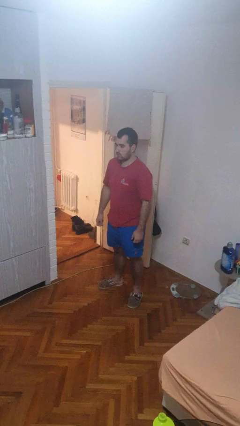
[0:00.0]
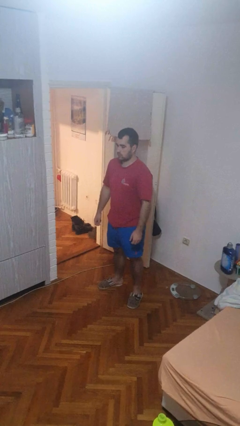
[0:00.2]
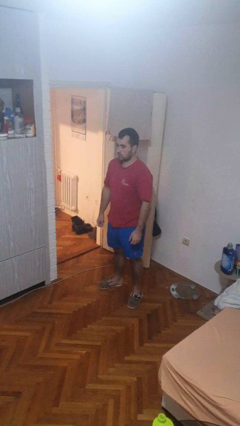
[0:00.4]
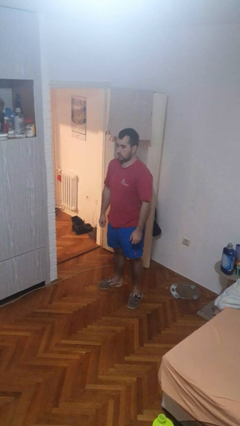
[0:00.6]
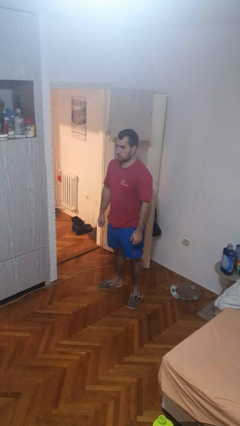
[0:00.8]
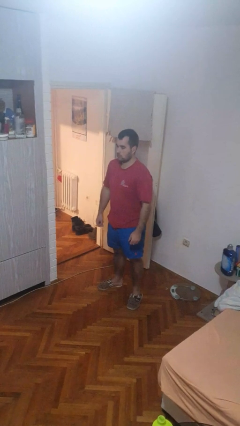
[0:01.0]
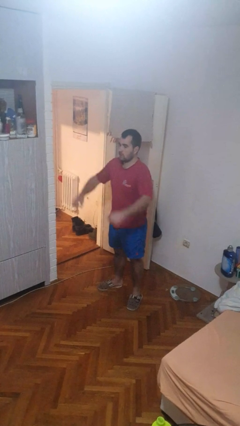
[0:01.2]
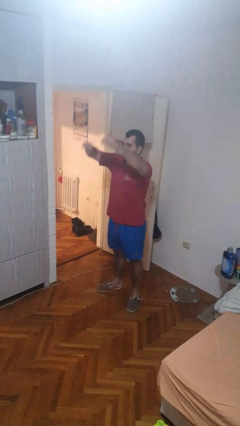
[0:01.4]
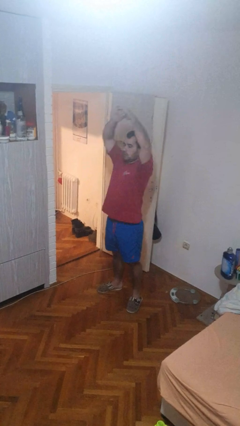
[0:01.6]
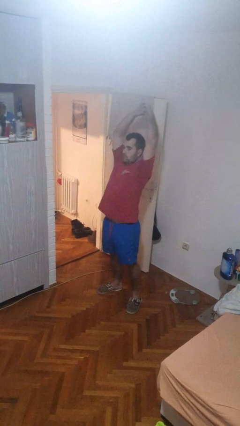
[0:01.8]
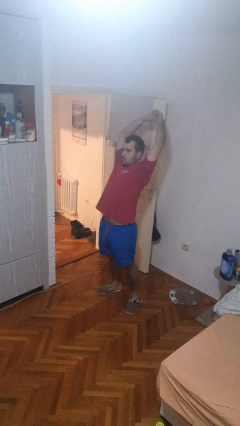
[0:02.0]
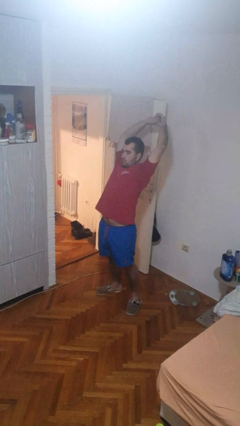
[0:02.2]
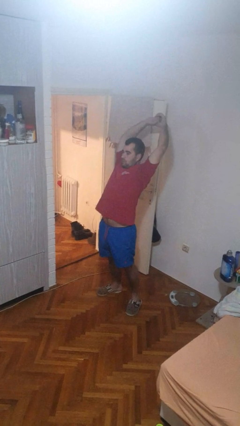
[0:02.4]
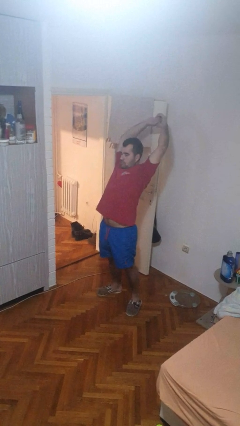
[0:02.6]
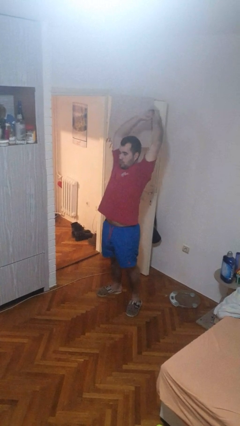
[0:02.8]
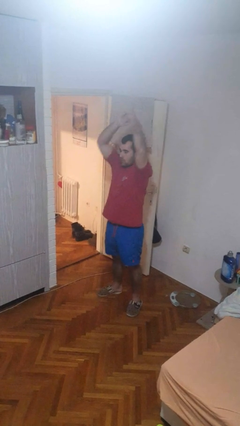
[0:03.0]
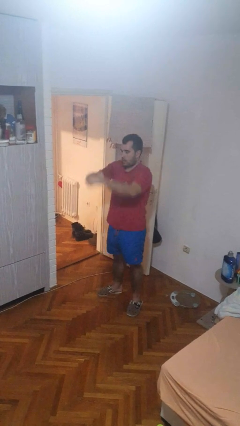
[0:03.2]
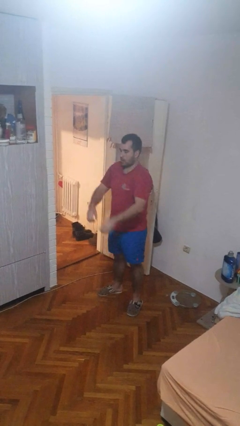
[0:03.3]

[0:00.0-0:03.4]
person stretches arms over head

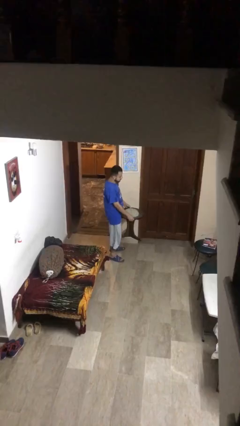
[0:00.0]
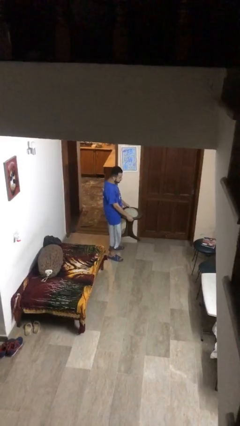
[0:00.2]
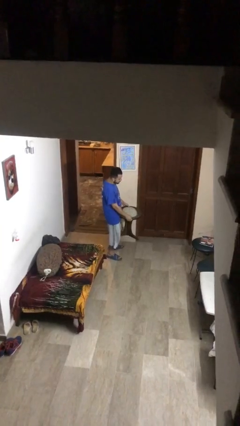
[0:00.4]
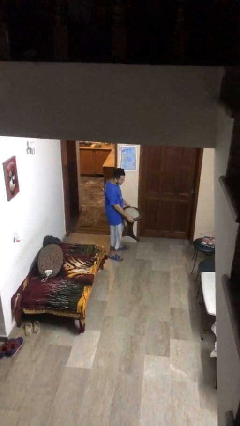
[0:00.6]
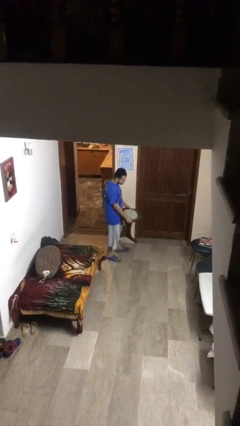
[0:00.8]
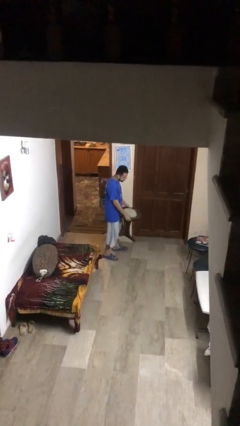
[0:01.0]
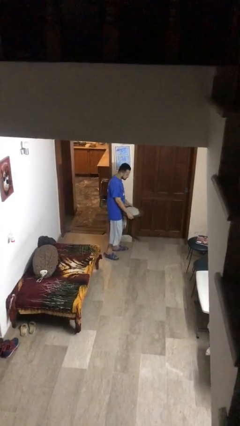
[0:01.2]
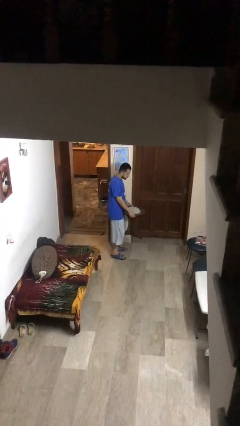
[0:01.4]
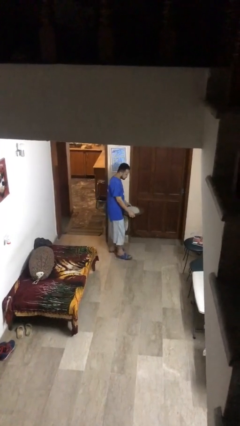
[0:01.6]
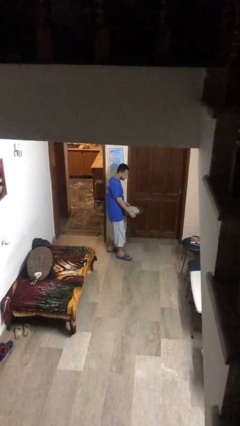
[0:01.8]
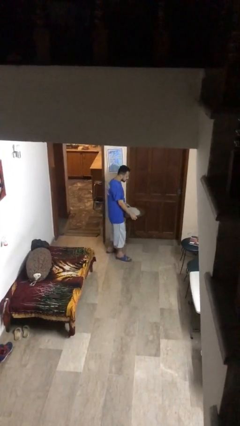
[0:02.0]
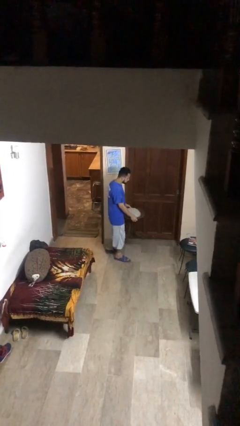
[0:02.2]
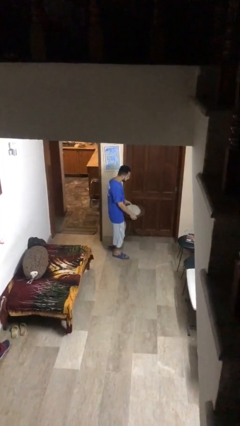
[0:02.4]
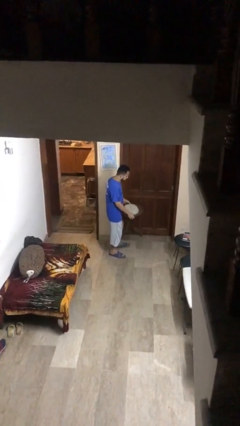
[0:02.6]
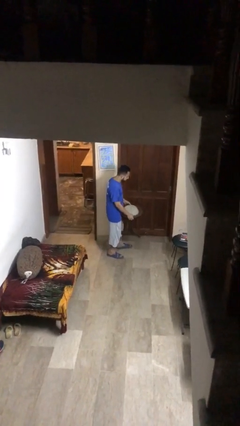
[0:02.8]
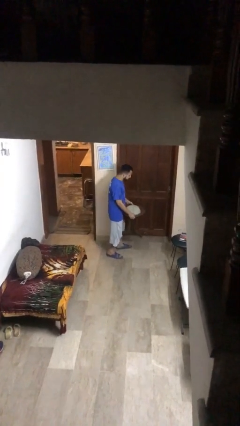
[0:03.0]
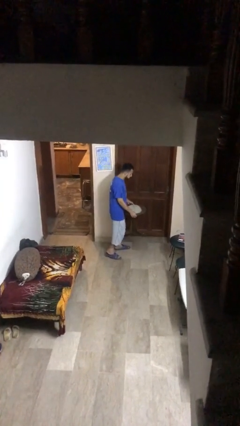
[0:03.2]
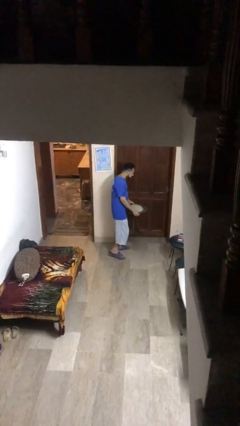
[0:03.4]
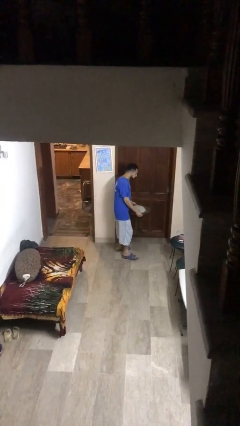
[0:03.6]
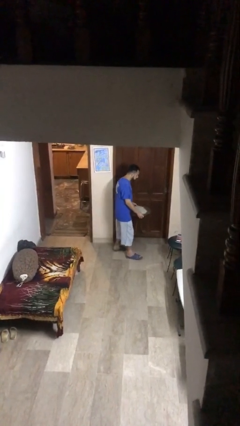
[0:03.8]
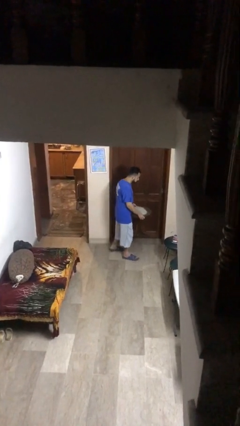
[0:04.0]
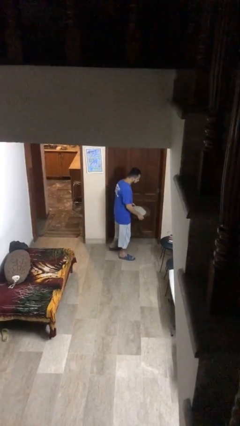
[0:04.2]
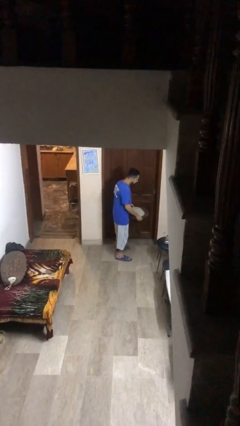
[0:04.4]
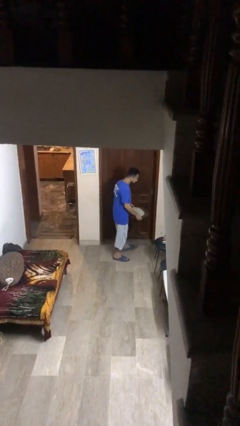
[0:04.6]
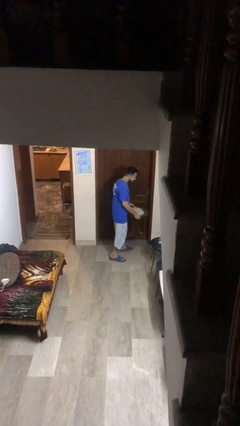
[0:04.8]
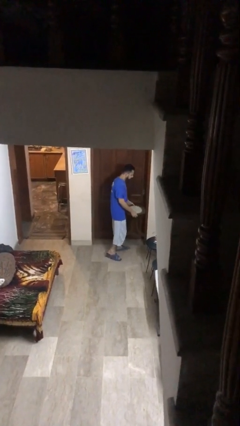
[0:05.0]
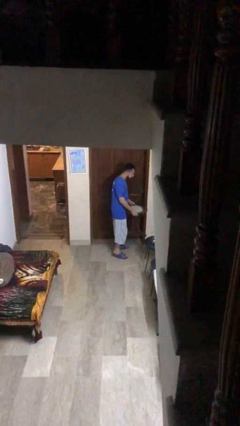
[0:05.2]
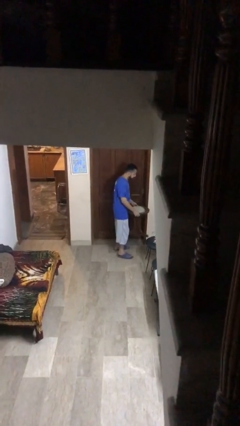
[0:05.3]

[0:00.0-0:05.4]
person carries heavy object

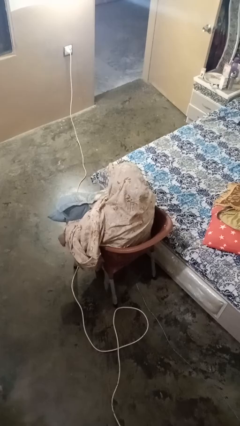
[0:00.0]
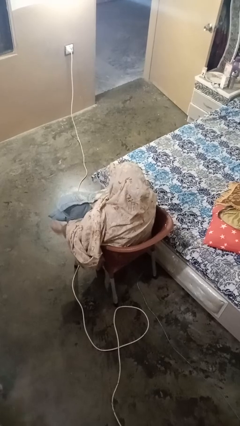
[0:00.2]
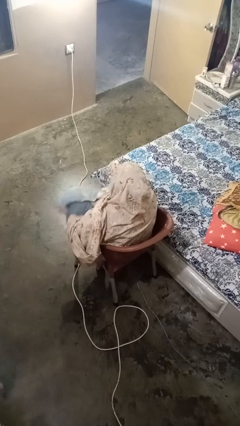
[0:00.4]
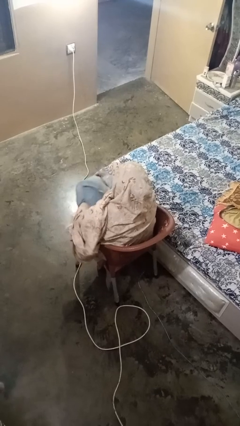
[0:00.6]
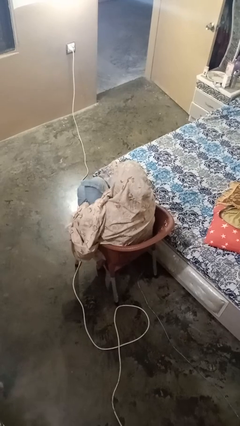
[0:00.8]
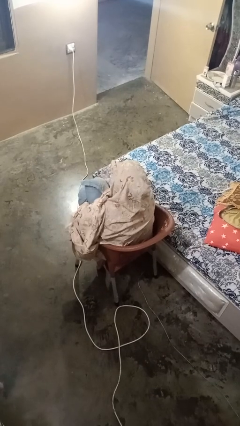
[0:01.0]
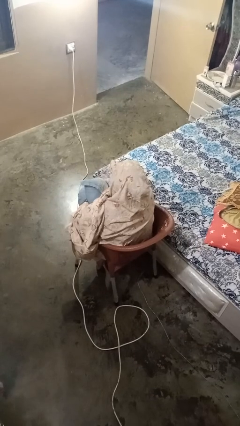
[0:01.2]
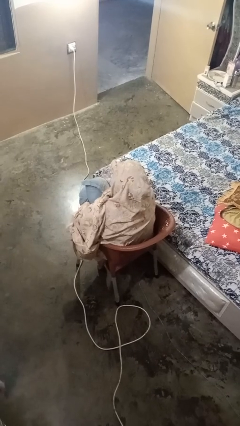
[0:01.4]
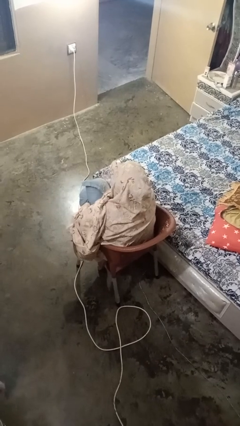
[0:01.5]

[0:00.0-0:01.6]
person squeezes object

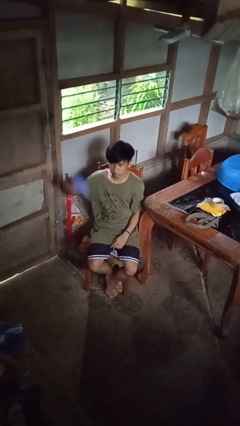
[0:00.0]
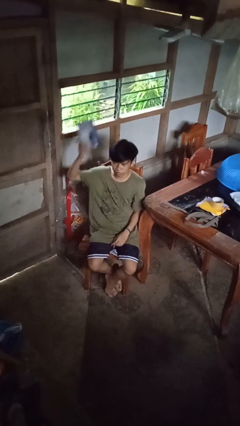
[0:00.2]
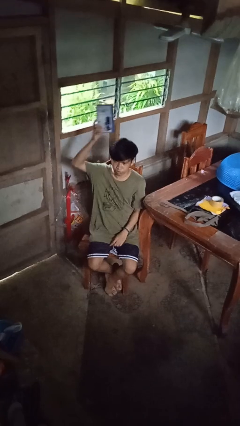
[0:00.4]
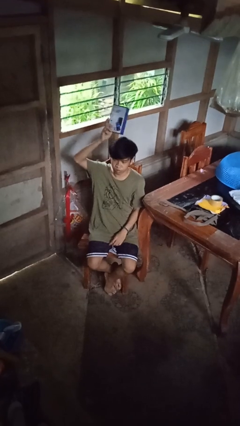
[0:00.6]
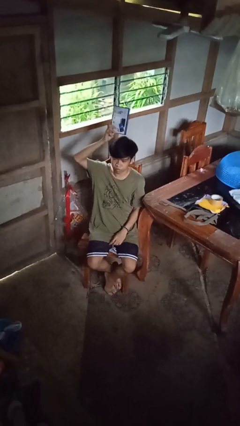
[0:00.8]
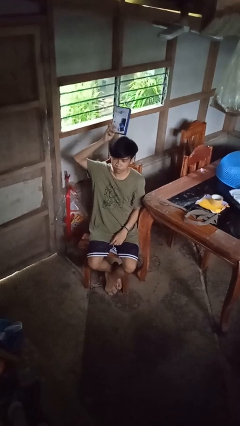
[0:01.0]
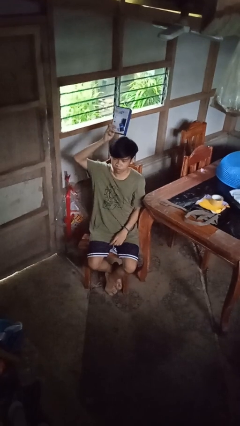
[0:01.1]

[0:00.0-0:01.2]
person holds object above head

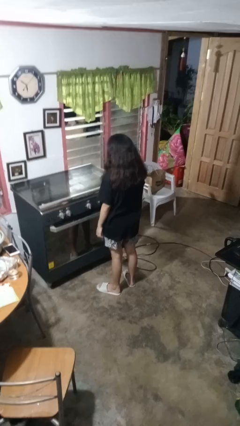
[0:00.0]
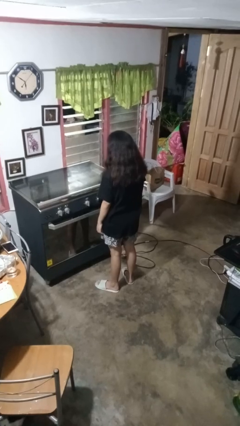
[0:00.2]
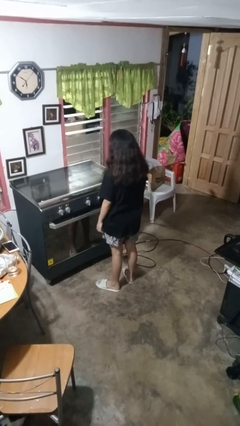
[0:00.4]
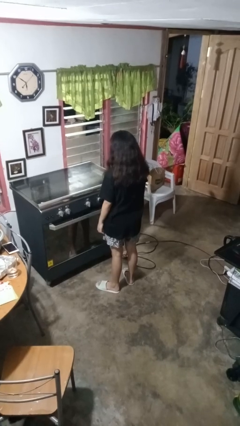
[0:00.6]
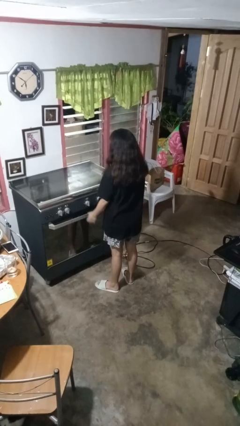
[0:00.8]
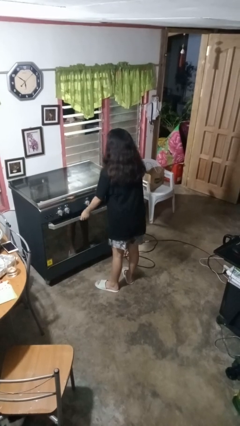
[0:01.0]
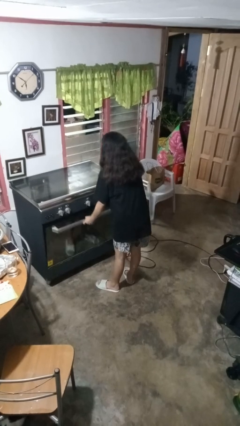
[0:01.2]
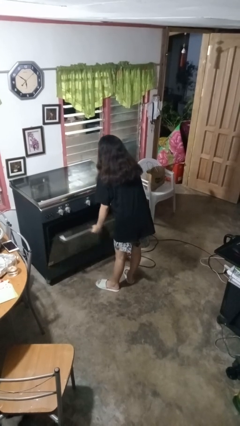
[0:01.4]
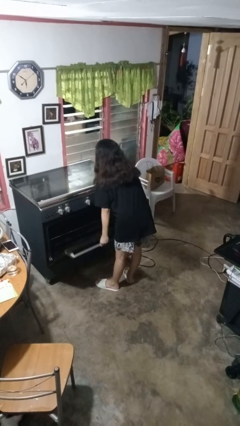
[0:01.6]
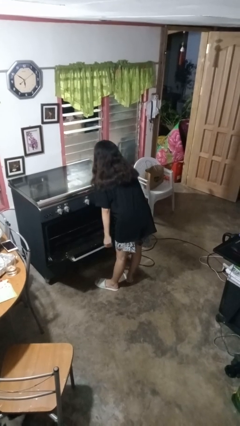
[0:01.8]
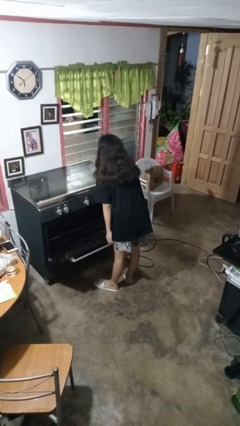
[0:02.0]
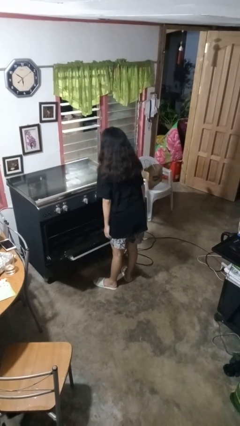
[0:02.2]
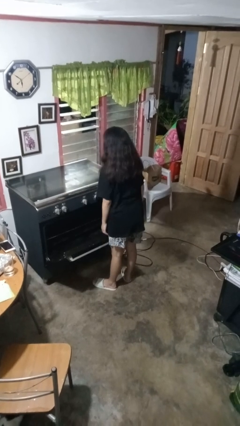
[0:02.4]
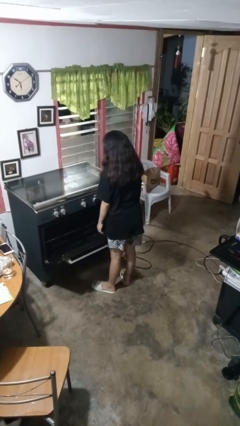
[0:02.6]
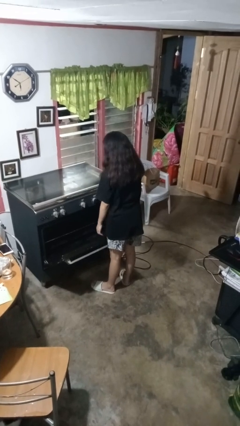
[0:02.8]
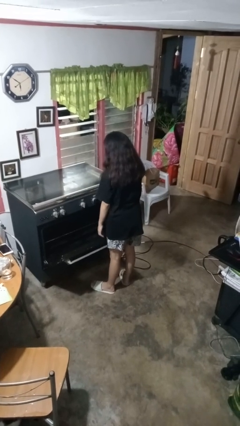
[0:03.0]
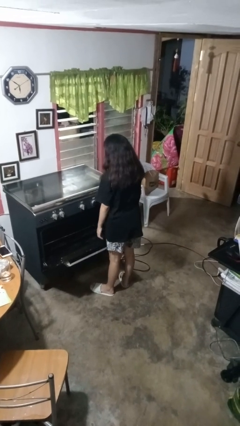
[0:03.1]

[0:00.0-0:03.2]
person opens oven door

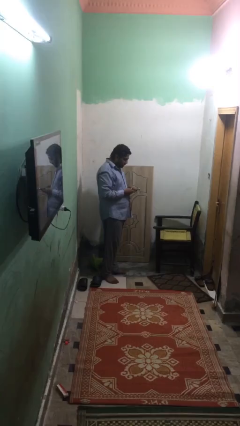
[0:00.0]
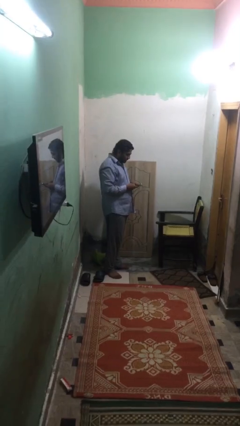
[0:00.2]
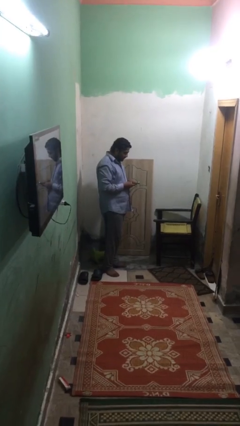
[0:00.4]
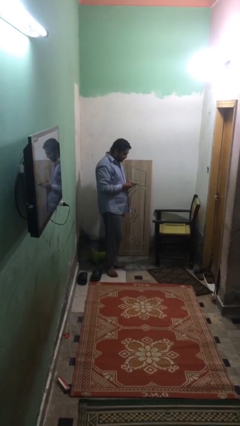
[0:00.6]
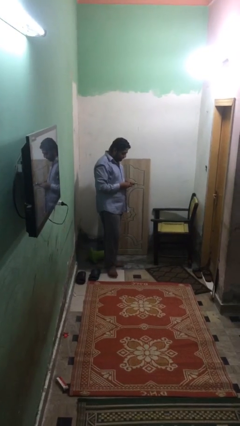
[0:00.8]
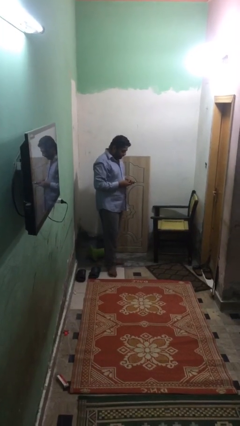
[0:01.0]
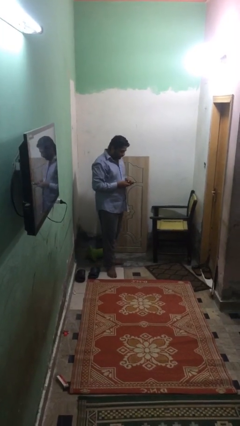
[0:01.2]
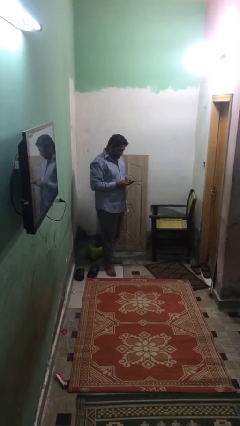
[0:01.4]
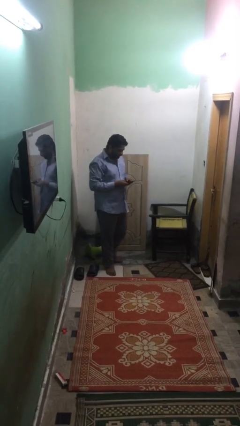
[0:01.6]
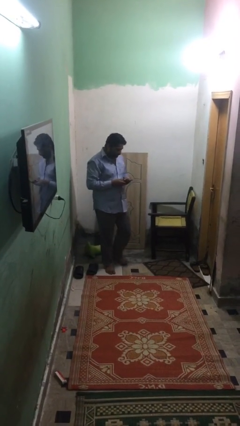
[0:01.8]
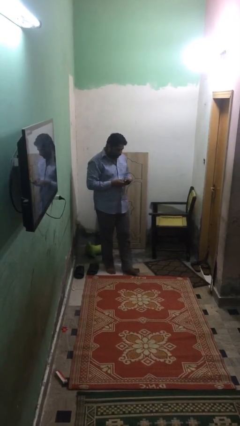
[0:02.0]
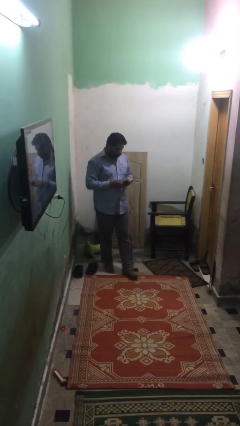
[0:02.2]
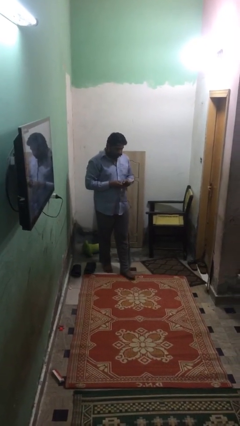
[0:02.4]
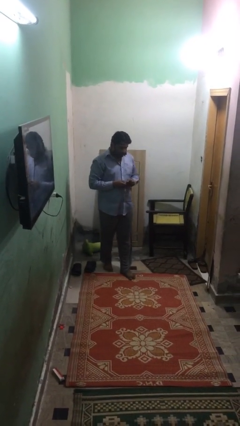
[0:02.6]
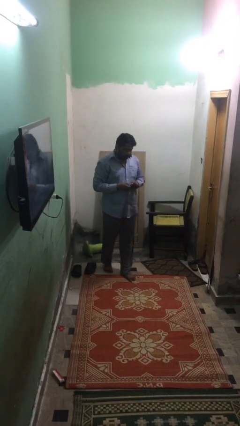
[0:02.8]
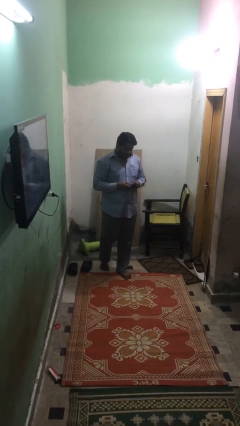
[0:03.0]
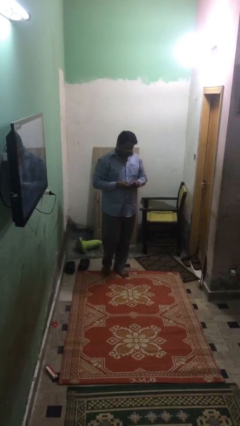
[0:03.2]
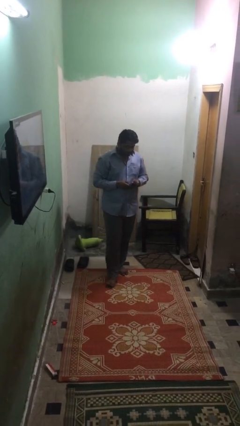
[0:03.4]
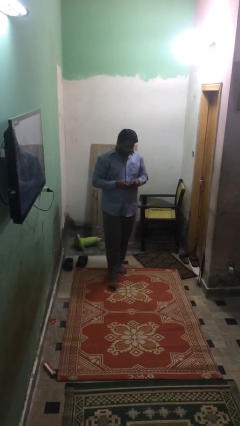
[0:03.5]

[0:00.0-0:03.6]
person texts on phone
